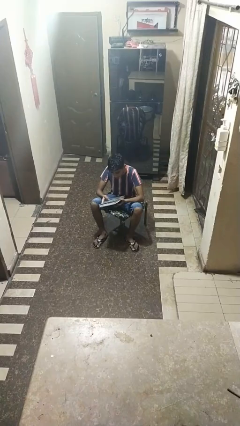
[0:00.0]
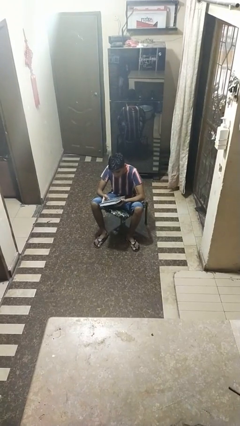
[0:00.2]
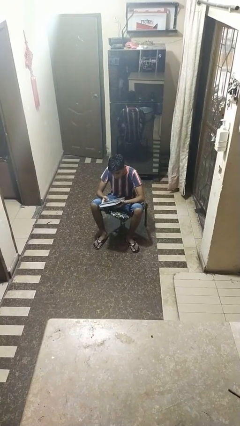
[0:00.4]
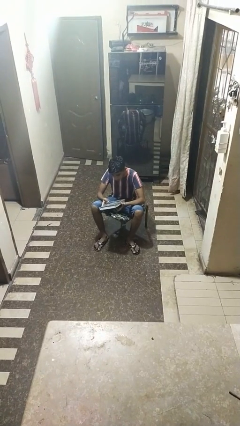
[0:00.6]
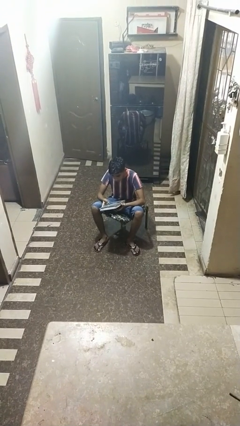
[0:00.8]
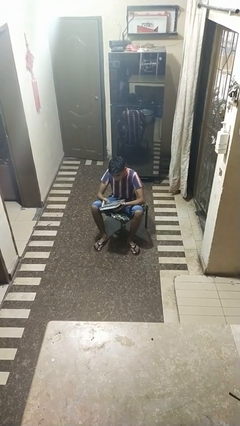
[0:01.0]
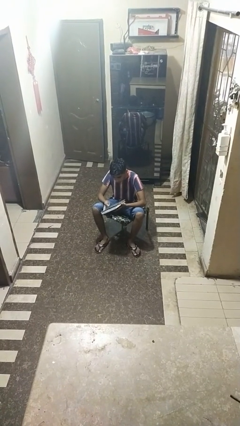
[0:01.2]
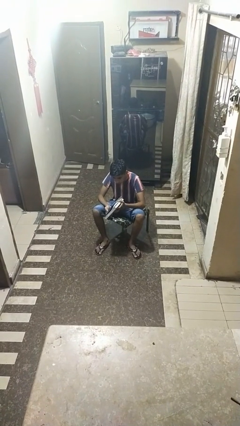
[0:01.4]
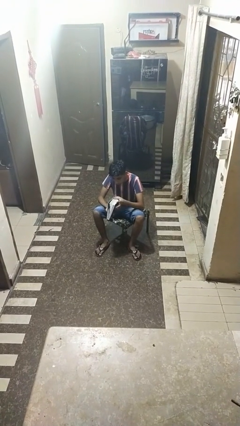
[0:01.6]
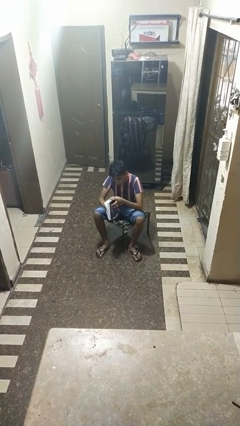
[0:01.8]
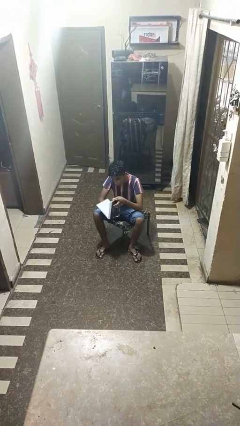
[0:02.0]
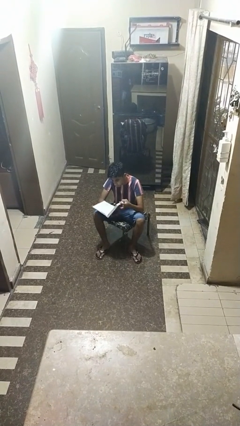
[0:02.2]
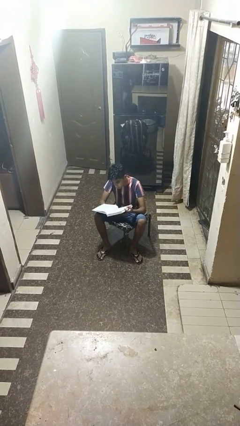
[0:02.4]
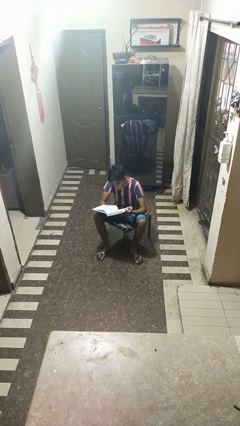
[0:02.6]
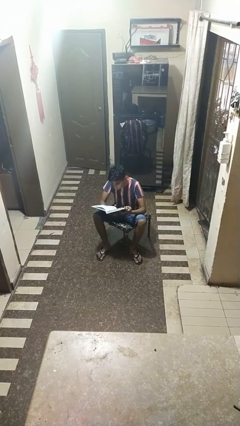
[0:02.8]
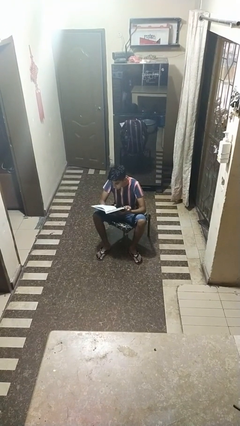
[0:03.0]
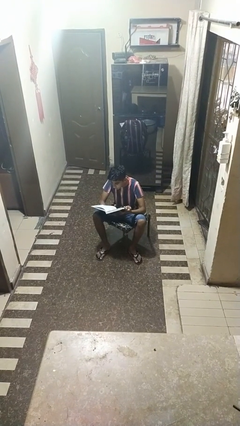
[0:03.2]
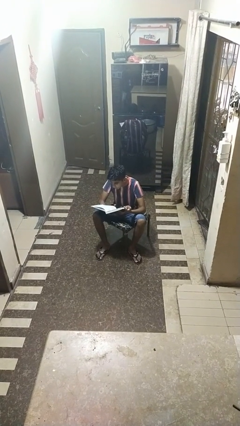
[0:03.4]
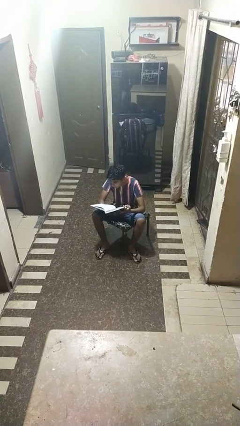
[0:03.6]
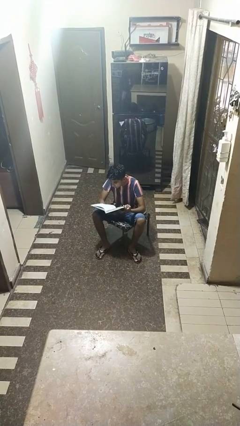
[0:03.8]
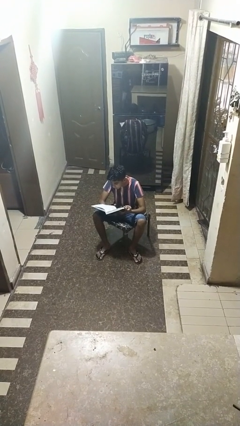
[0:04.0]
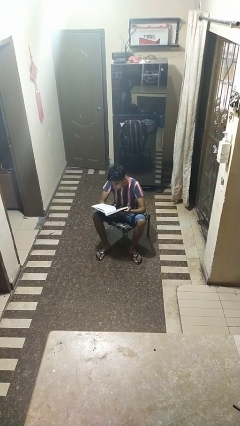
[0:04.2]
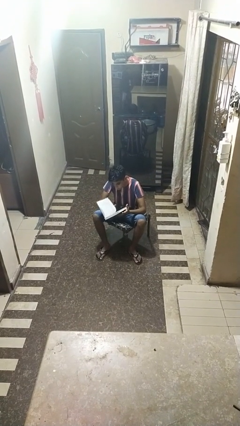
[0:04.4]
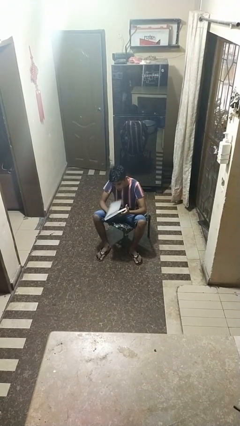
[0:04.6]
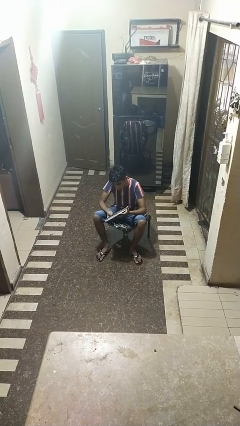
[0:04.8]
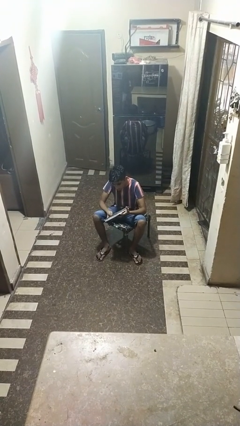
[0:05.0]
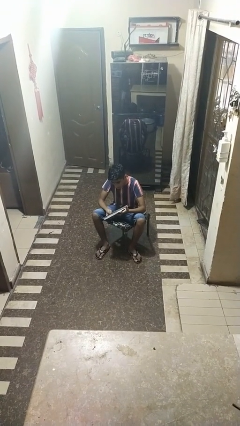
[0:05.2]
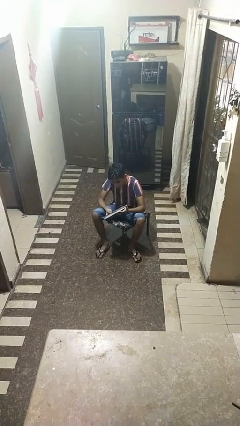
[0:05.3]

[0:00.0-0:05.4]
person reads book

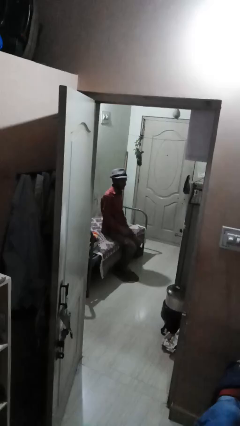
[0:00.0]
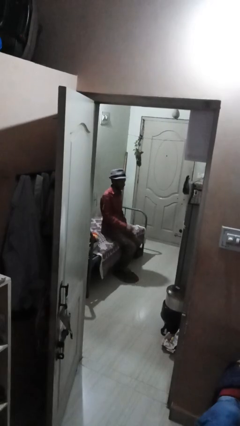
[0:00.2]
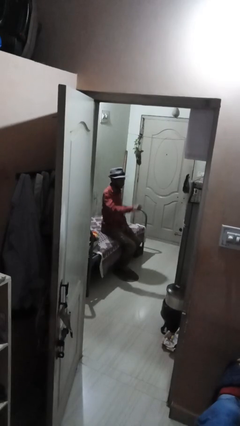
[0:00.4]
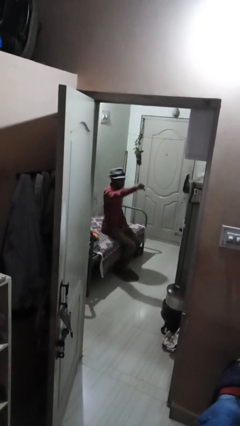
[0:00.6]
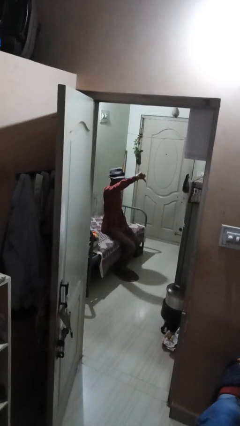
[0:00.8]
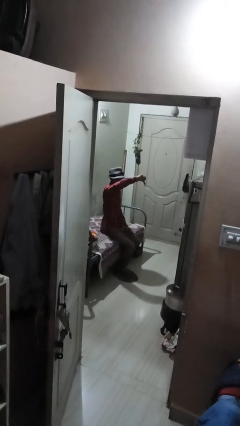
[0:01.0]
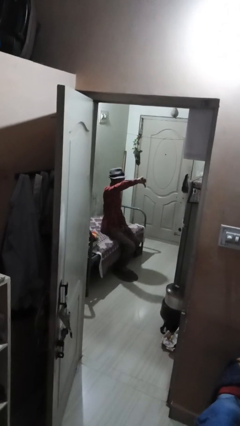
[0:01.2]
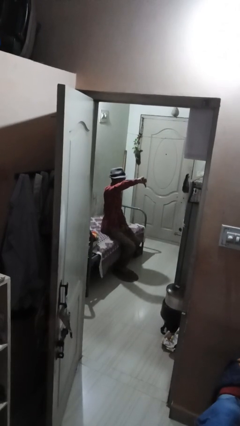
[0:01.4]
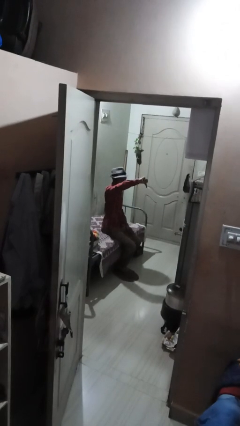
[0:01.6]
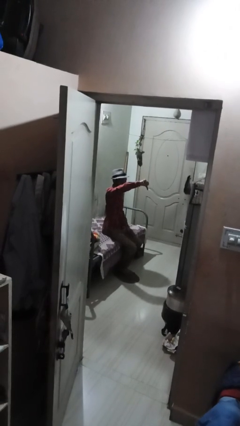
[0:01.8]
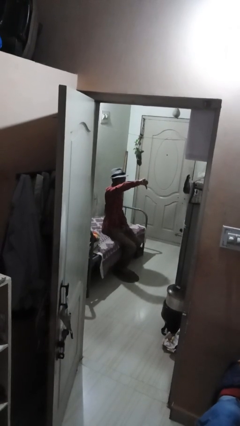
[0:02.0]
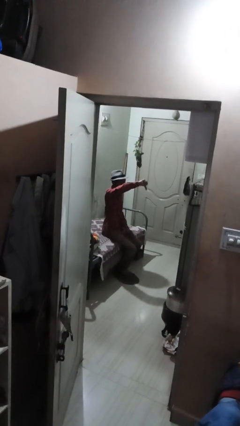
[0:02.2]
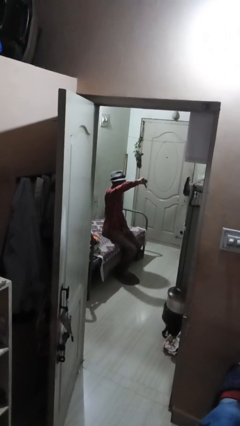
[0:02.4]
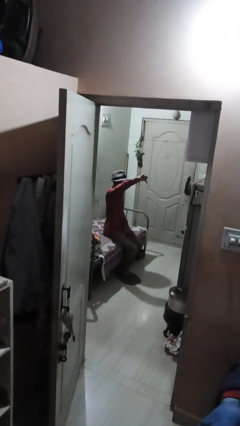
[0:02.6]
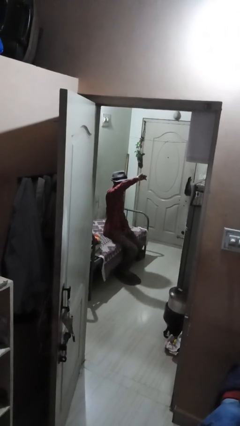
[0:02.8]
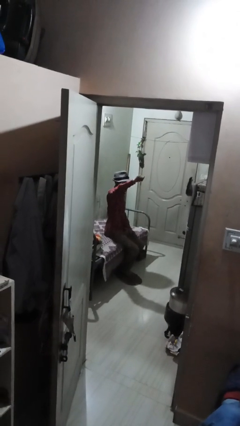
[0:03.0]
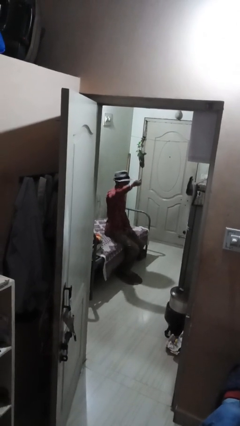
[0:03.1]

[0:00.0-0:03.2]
person gestures thumbs down

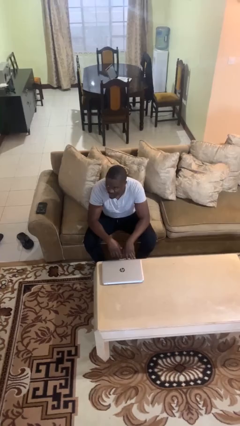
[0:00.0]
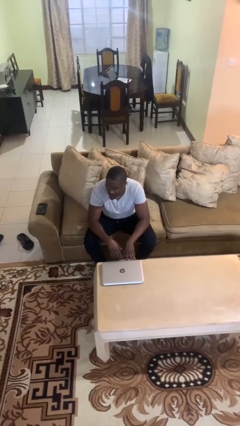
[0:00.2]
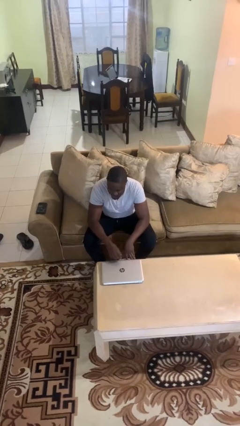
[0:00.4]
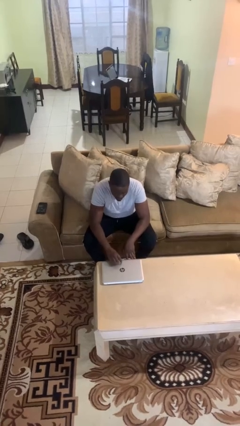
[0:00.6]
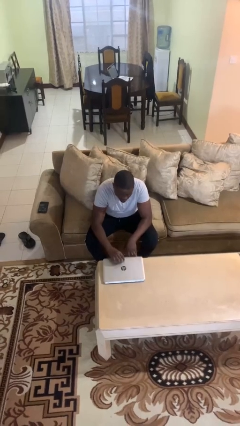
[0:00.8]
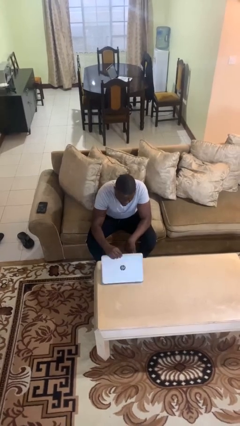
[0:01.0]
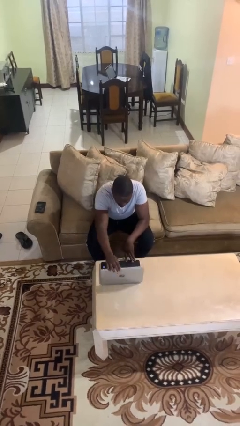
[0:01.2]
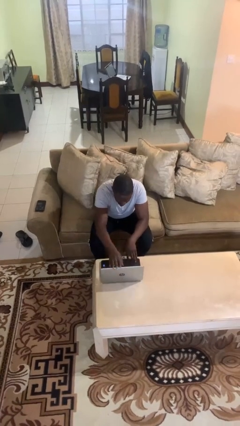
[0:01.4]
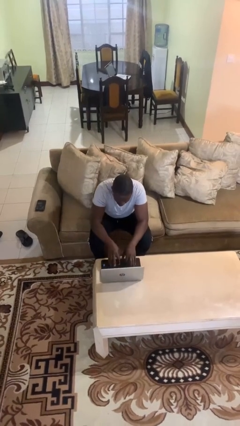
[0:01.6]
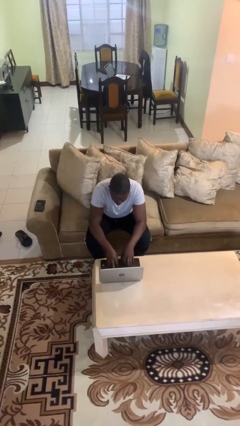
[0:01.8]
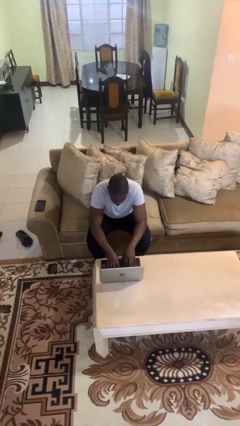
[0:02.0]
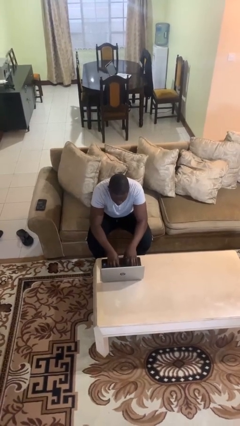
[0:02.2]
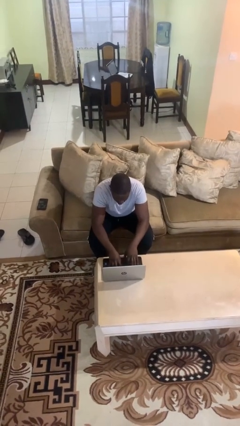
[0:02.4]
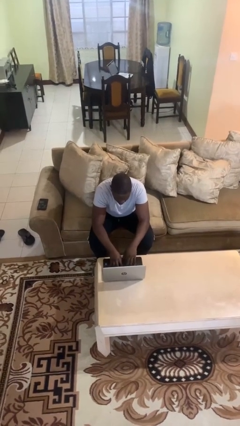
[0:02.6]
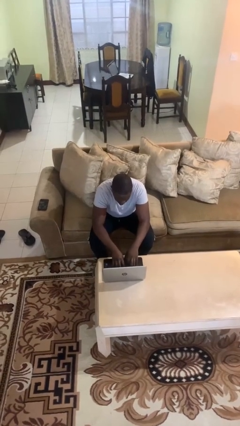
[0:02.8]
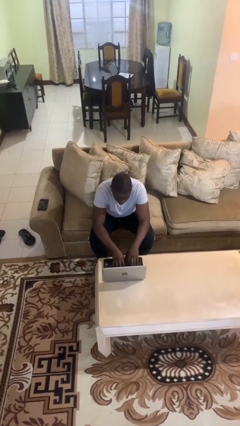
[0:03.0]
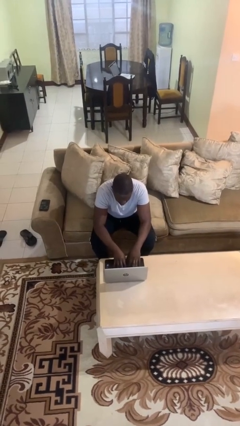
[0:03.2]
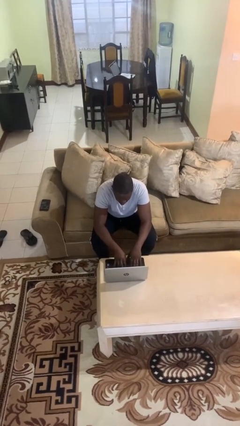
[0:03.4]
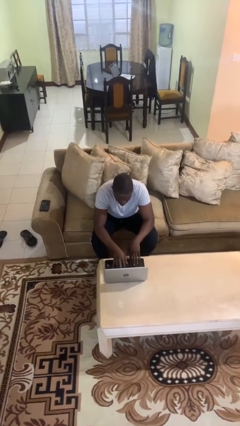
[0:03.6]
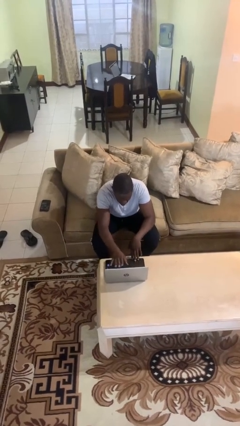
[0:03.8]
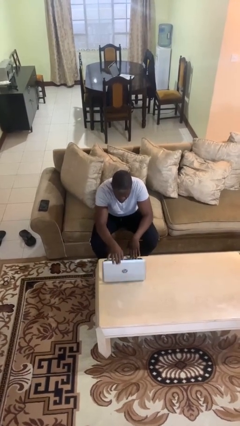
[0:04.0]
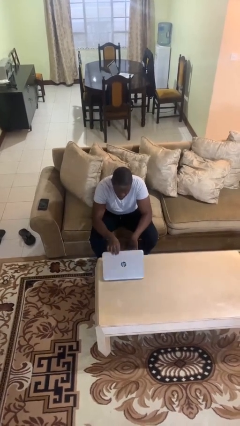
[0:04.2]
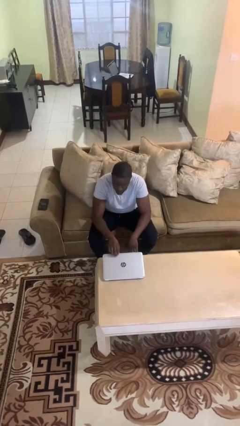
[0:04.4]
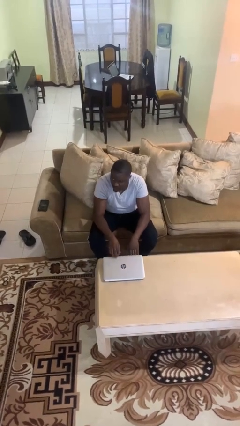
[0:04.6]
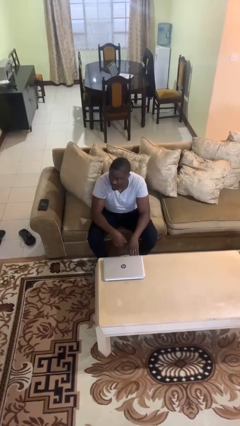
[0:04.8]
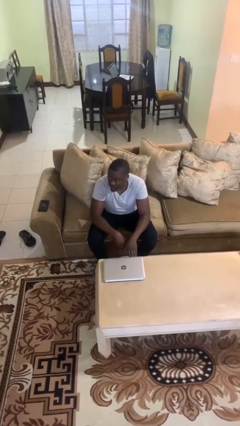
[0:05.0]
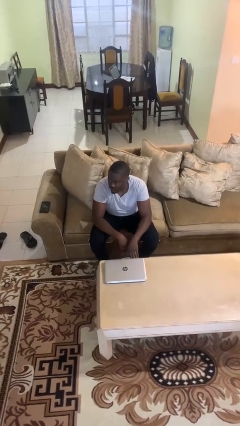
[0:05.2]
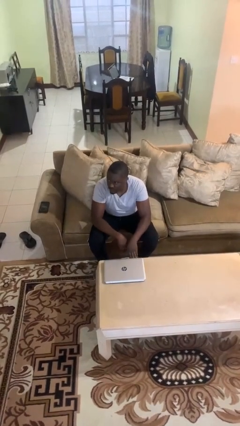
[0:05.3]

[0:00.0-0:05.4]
person interacts with laptop

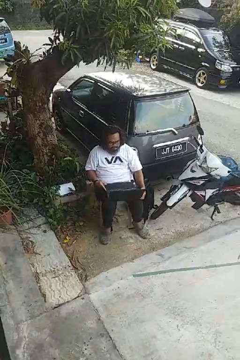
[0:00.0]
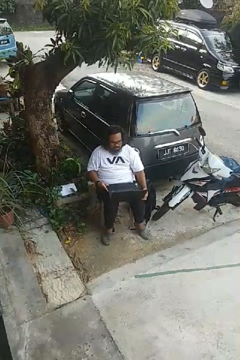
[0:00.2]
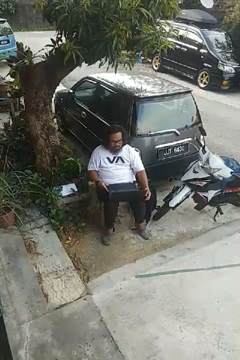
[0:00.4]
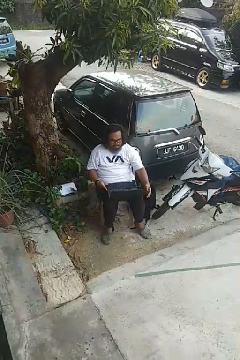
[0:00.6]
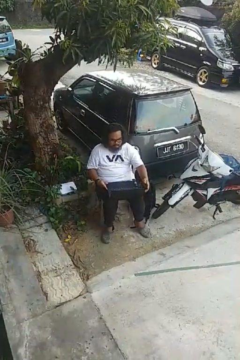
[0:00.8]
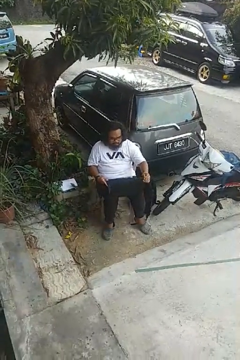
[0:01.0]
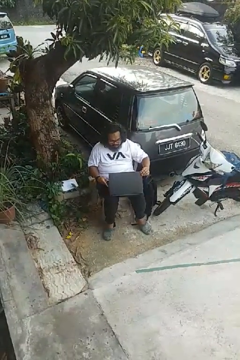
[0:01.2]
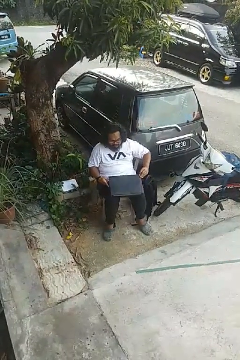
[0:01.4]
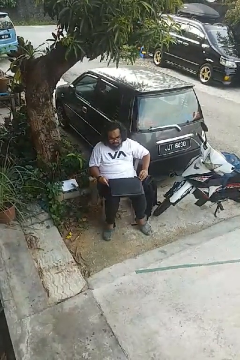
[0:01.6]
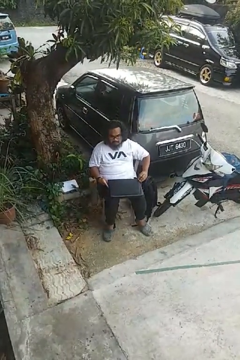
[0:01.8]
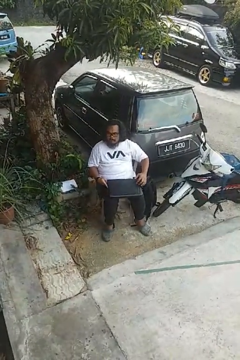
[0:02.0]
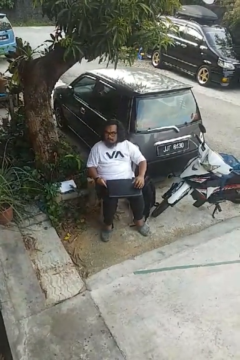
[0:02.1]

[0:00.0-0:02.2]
person closes laptop

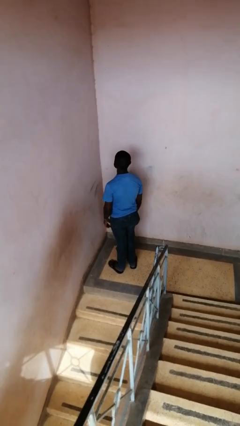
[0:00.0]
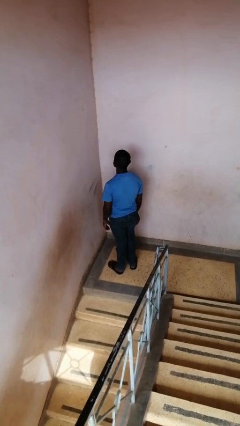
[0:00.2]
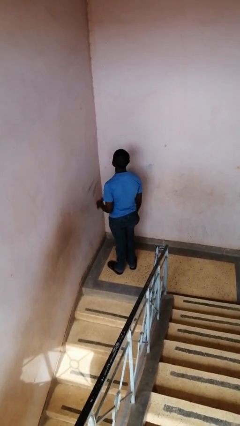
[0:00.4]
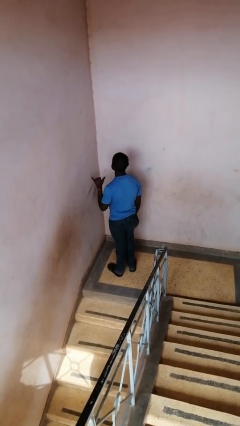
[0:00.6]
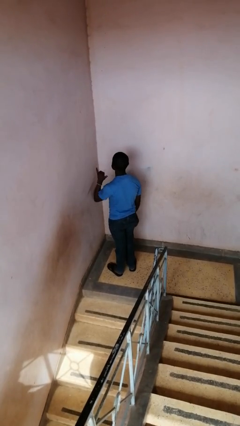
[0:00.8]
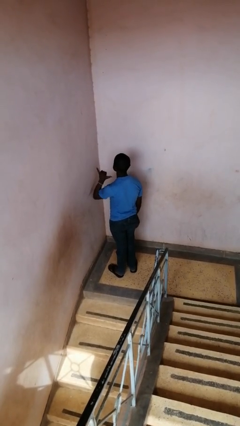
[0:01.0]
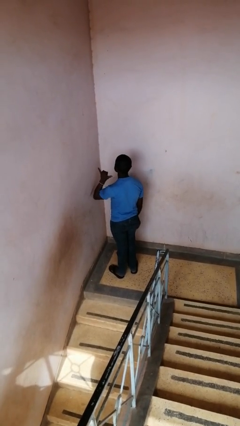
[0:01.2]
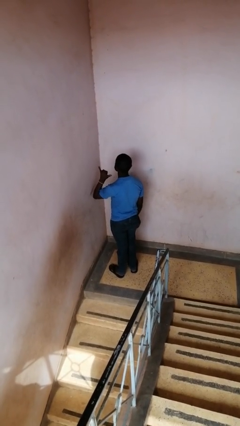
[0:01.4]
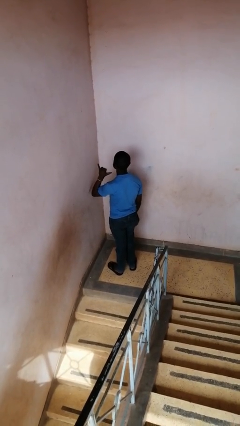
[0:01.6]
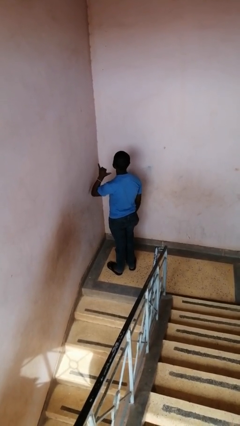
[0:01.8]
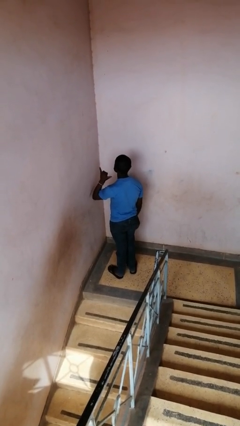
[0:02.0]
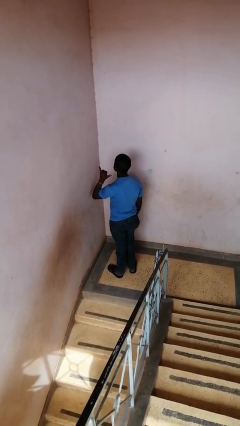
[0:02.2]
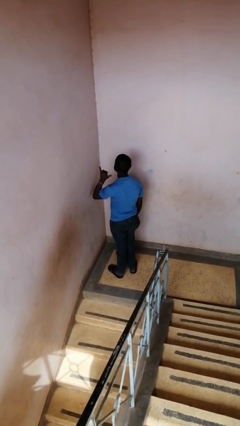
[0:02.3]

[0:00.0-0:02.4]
person gestures hang loose
